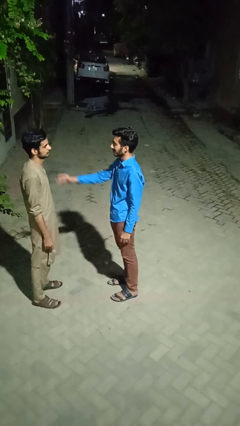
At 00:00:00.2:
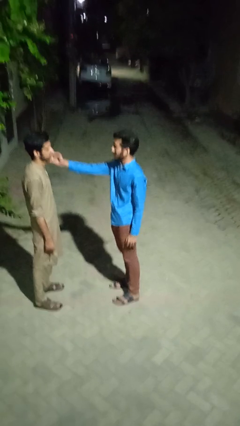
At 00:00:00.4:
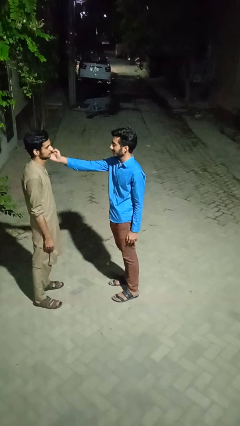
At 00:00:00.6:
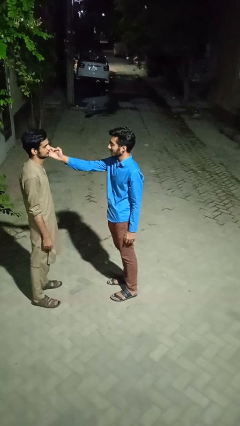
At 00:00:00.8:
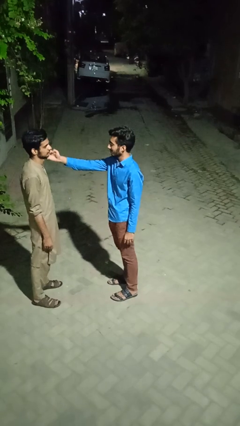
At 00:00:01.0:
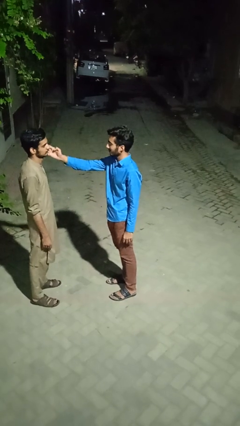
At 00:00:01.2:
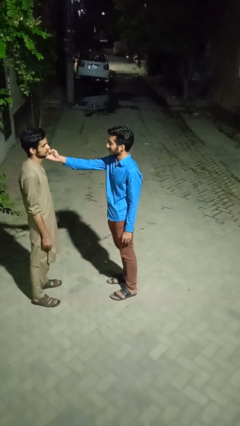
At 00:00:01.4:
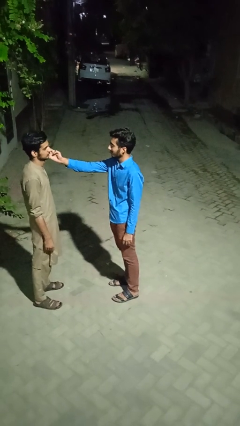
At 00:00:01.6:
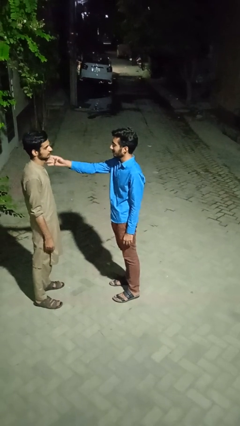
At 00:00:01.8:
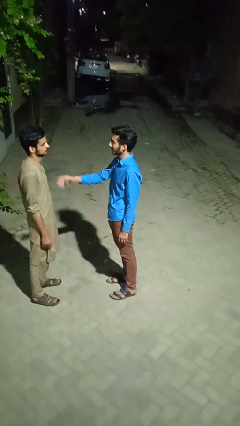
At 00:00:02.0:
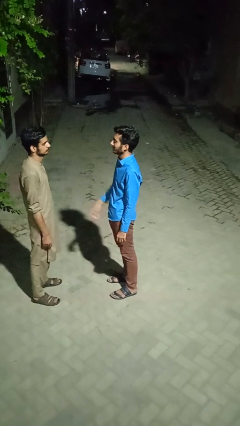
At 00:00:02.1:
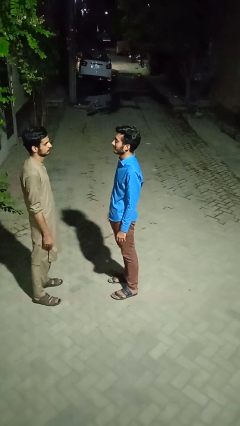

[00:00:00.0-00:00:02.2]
person touches face of person

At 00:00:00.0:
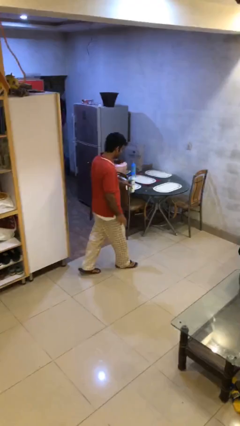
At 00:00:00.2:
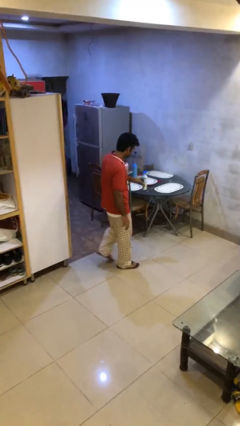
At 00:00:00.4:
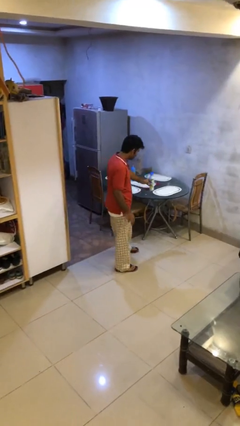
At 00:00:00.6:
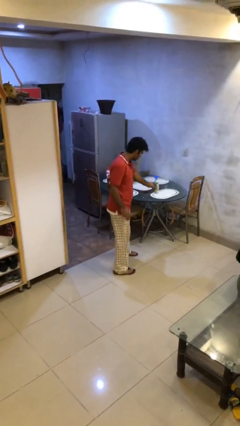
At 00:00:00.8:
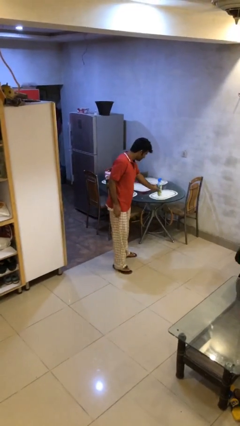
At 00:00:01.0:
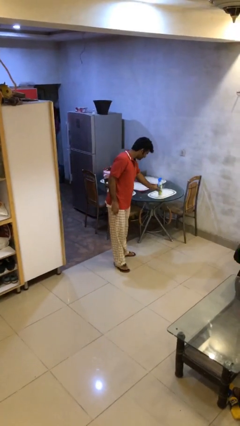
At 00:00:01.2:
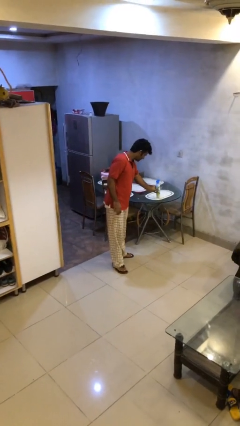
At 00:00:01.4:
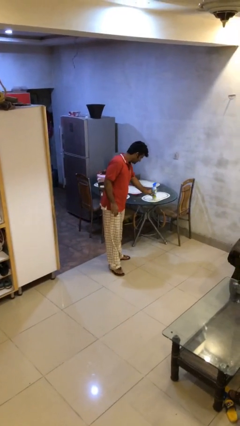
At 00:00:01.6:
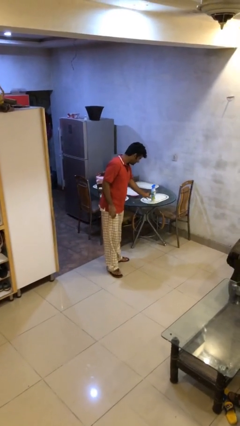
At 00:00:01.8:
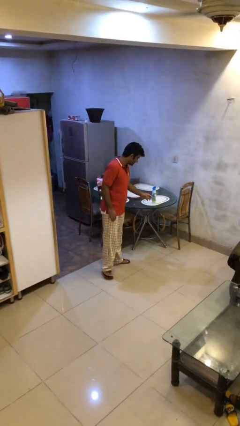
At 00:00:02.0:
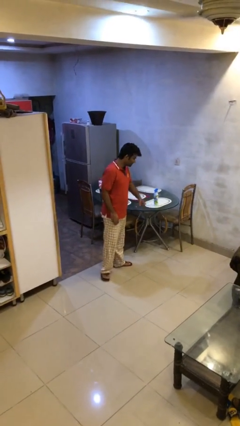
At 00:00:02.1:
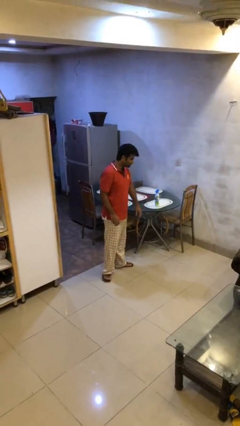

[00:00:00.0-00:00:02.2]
person puts down object on table

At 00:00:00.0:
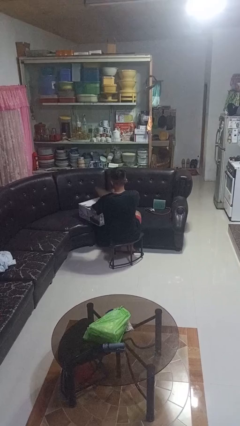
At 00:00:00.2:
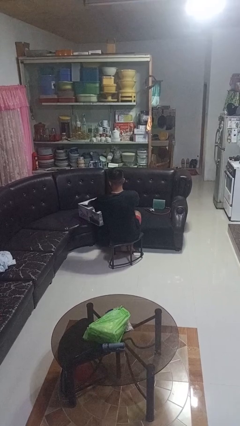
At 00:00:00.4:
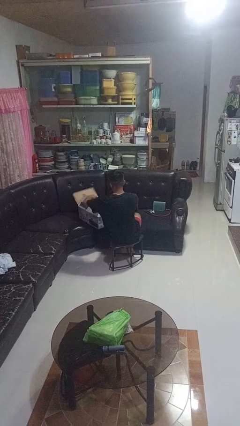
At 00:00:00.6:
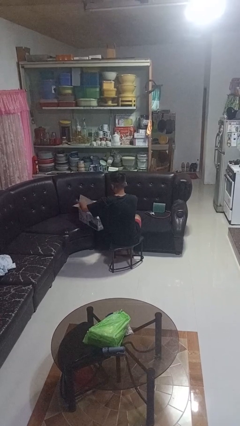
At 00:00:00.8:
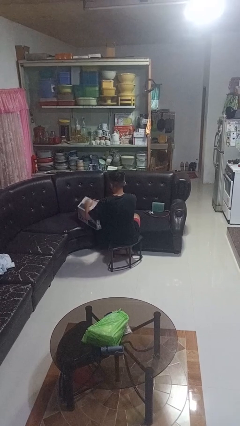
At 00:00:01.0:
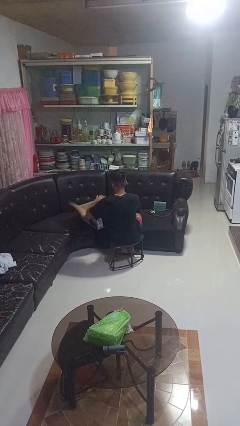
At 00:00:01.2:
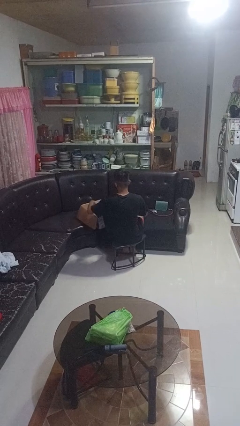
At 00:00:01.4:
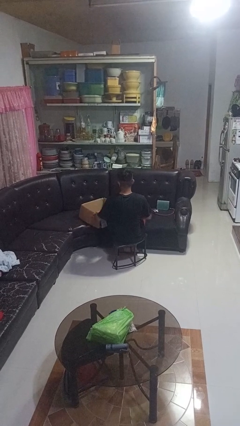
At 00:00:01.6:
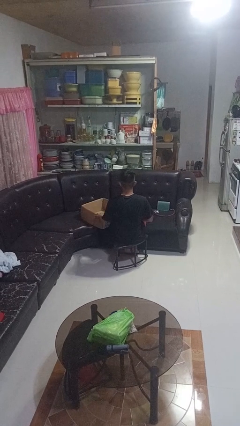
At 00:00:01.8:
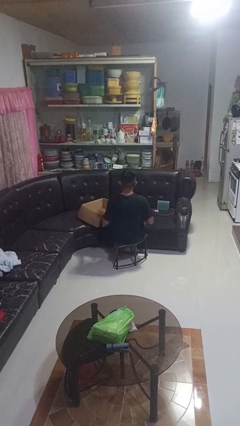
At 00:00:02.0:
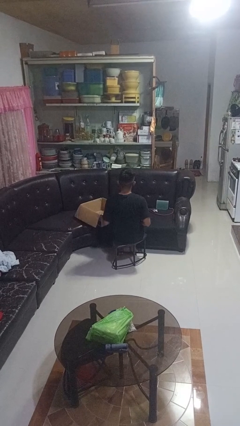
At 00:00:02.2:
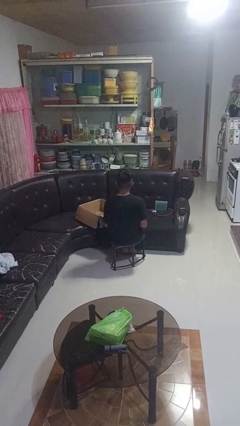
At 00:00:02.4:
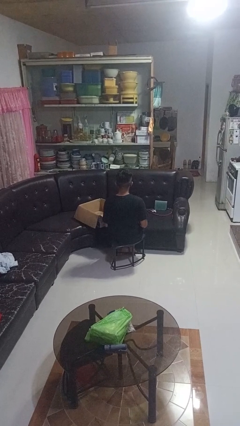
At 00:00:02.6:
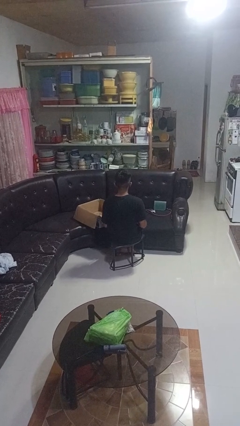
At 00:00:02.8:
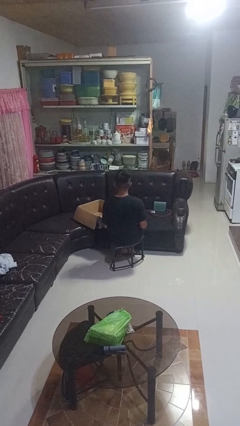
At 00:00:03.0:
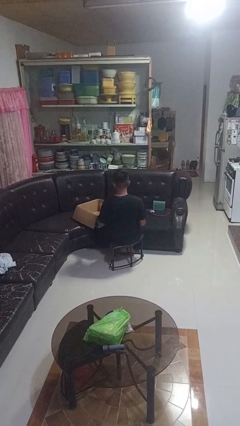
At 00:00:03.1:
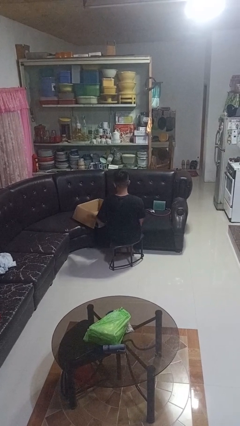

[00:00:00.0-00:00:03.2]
person opens box

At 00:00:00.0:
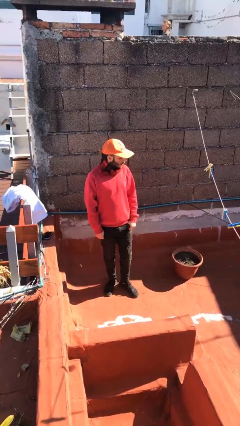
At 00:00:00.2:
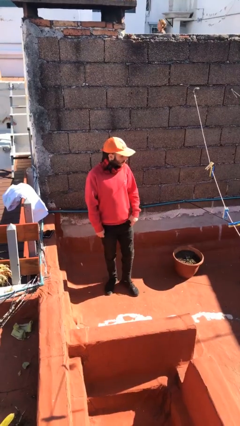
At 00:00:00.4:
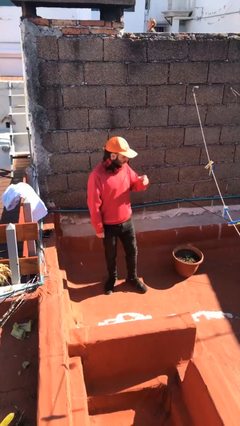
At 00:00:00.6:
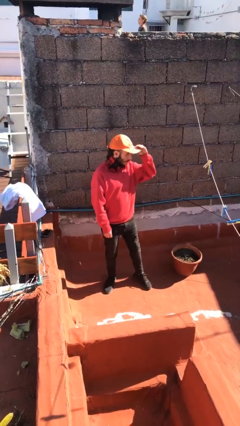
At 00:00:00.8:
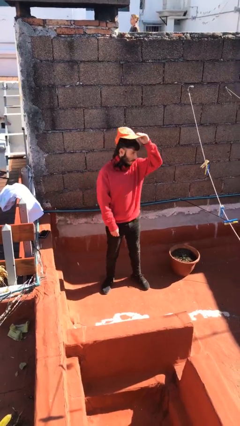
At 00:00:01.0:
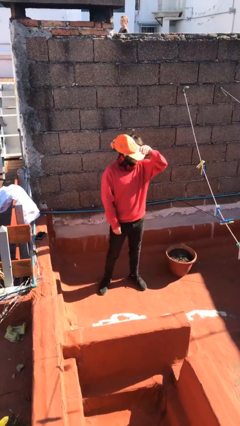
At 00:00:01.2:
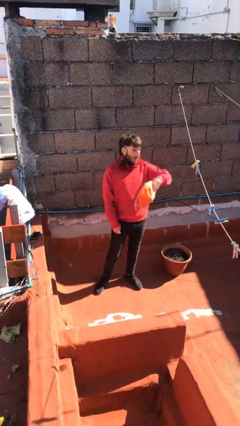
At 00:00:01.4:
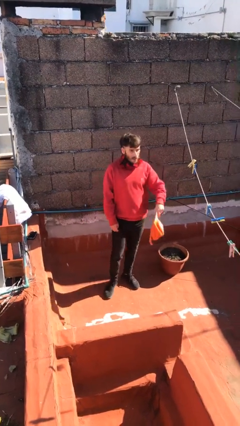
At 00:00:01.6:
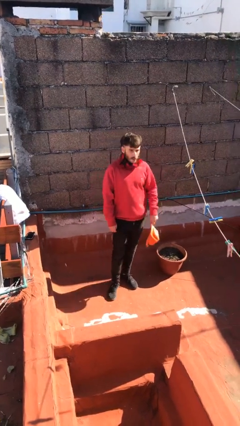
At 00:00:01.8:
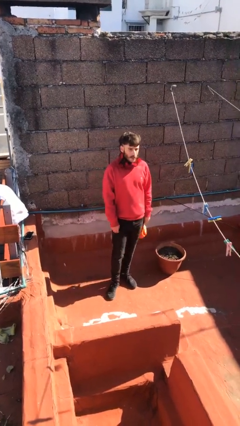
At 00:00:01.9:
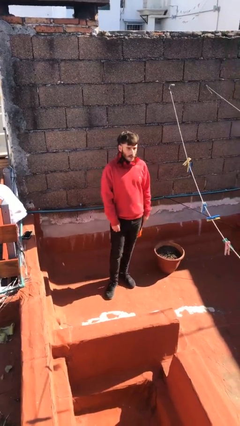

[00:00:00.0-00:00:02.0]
person takes off hat

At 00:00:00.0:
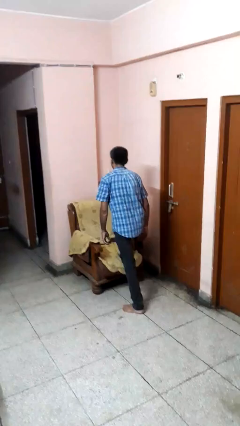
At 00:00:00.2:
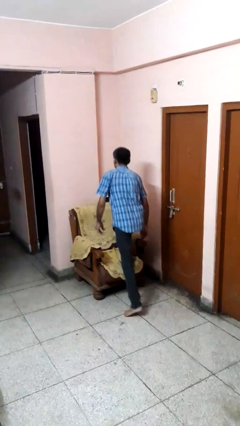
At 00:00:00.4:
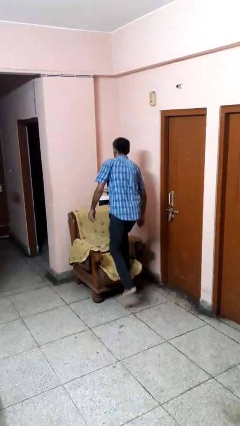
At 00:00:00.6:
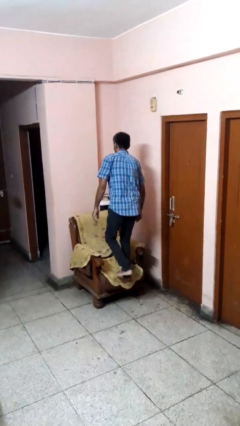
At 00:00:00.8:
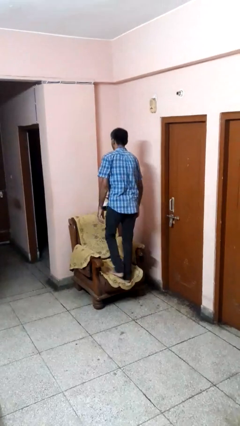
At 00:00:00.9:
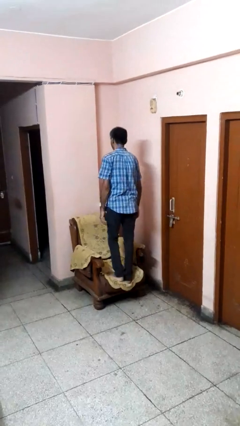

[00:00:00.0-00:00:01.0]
person climbs on couch

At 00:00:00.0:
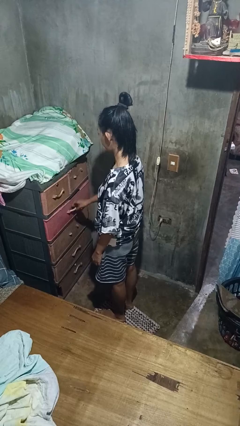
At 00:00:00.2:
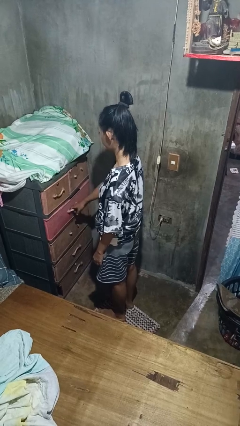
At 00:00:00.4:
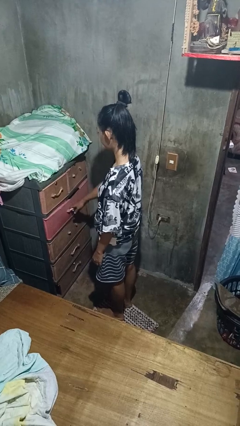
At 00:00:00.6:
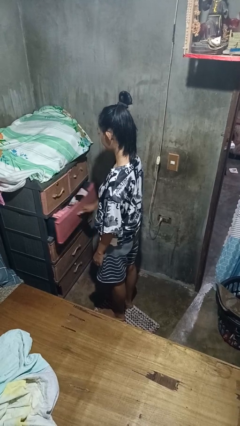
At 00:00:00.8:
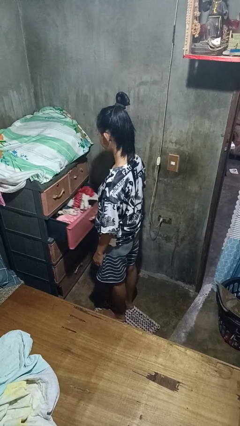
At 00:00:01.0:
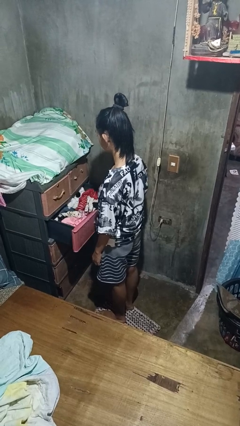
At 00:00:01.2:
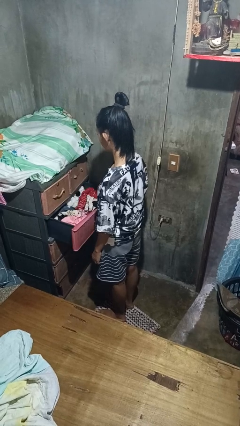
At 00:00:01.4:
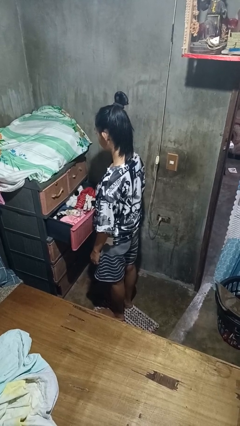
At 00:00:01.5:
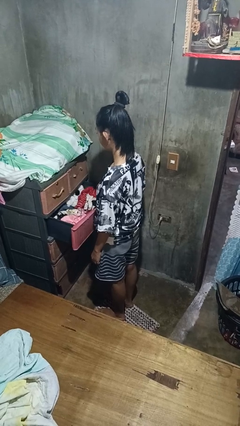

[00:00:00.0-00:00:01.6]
person opens dresser drawer

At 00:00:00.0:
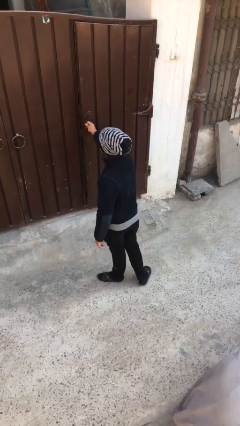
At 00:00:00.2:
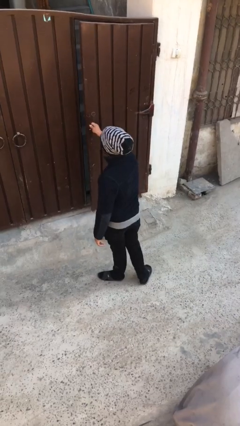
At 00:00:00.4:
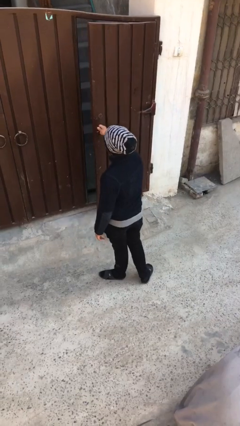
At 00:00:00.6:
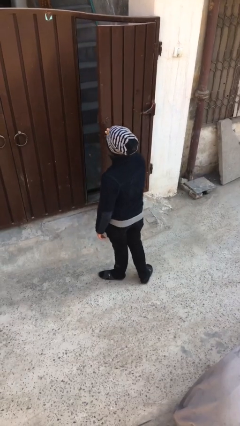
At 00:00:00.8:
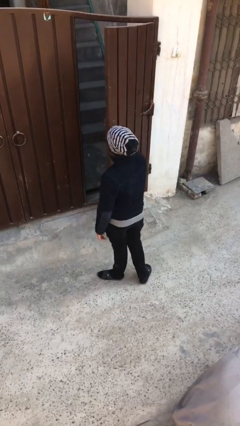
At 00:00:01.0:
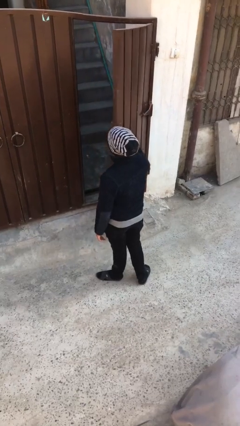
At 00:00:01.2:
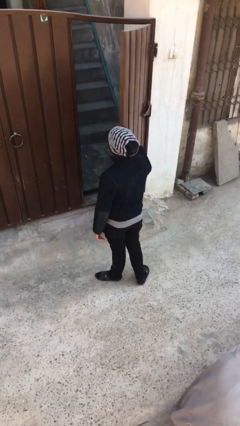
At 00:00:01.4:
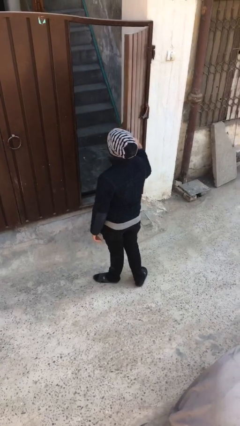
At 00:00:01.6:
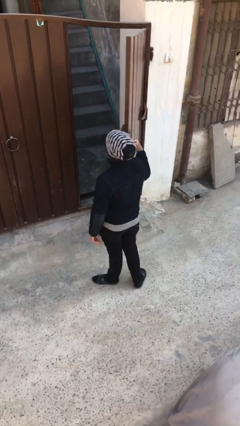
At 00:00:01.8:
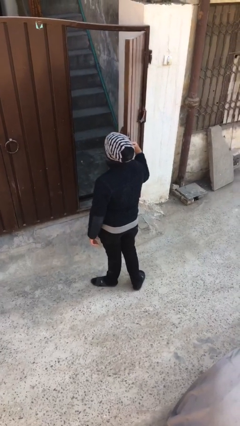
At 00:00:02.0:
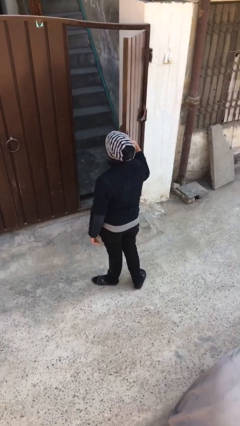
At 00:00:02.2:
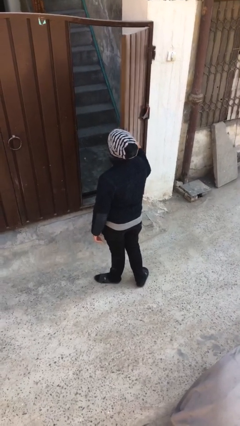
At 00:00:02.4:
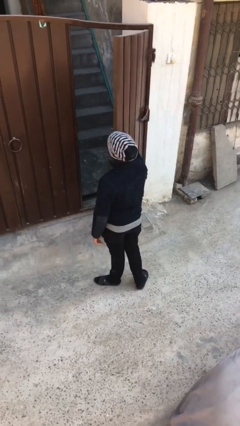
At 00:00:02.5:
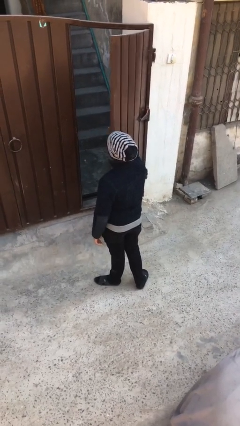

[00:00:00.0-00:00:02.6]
person opens facility door

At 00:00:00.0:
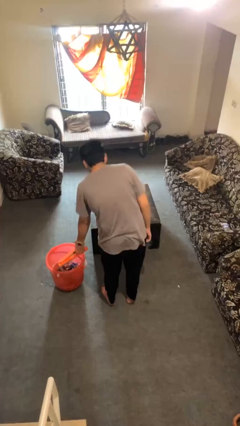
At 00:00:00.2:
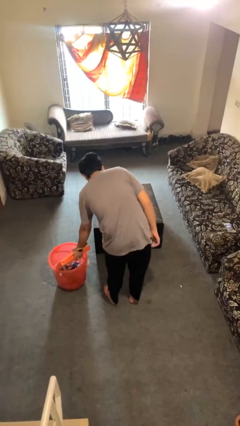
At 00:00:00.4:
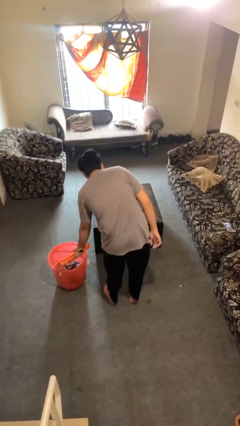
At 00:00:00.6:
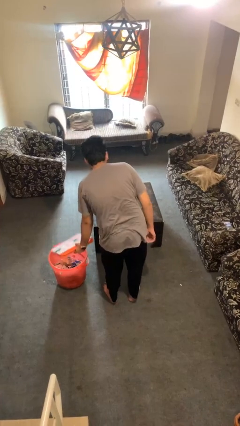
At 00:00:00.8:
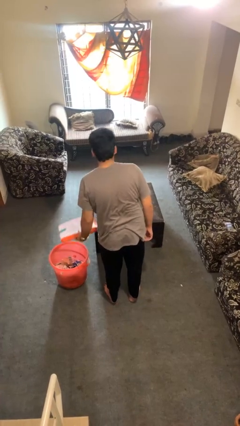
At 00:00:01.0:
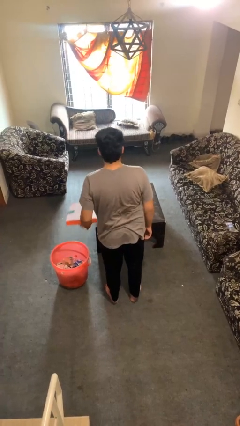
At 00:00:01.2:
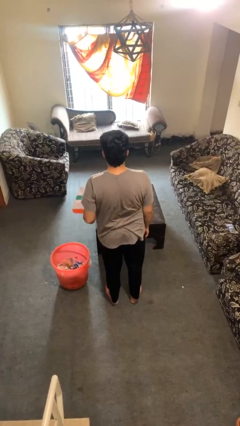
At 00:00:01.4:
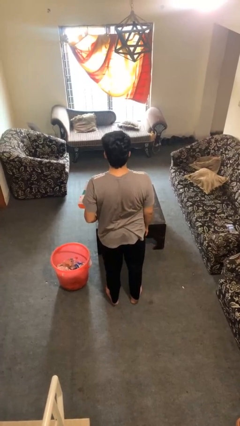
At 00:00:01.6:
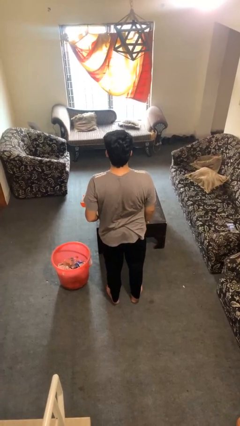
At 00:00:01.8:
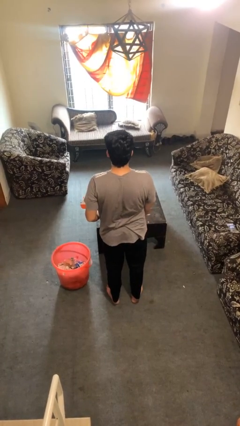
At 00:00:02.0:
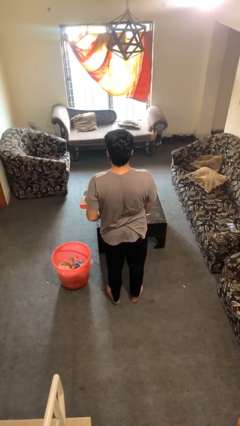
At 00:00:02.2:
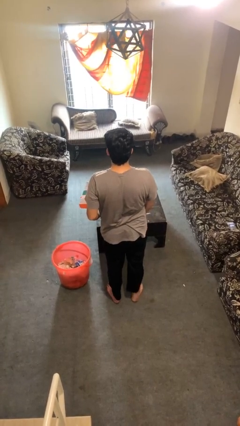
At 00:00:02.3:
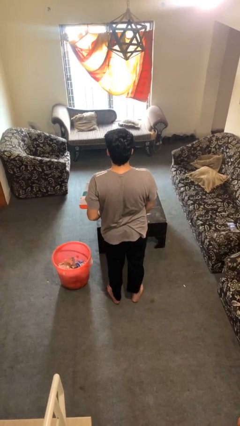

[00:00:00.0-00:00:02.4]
person takes object from basket
